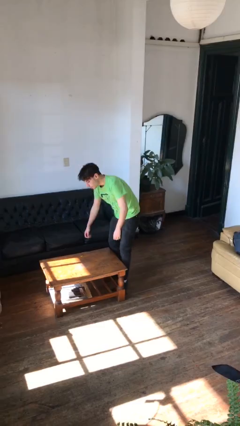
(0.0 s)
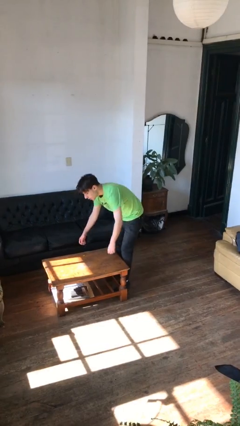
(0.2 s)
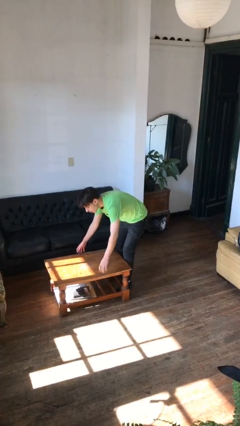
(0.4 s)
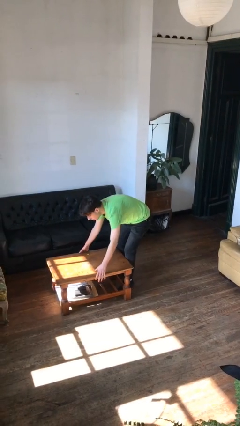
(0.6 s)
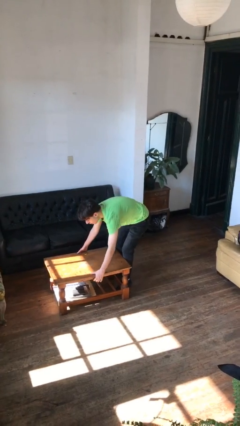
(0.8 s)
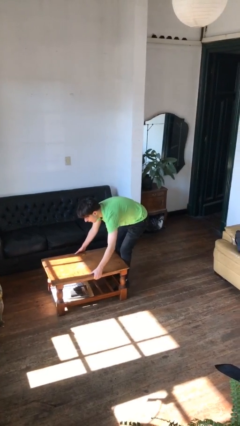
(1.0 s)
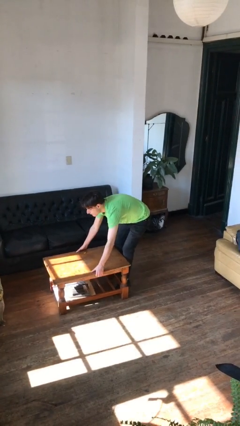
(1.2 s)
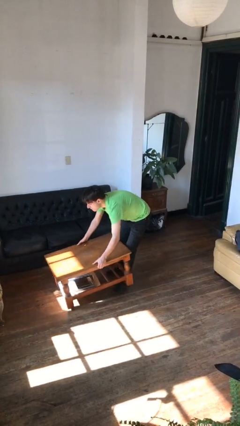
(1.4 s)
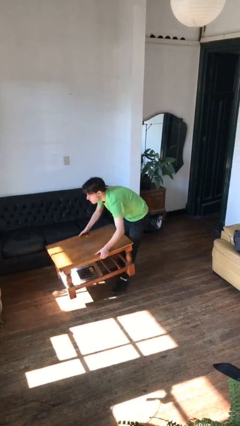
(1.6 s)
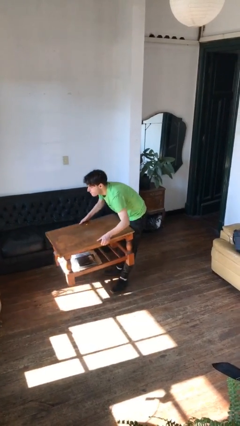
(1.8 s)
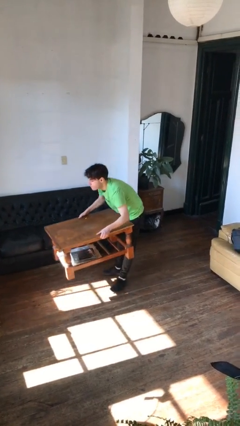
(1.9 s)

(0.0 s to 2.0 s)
person picks up object from floor

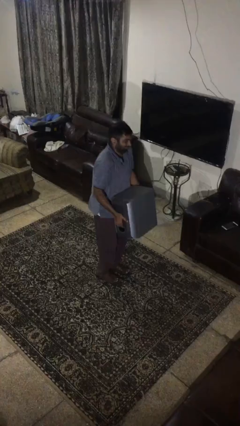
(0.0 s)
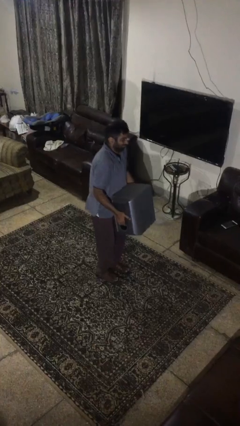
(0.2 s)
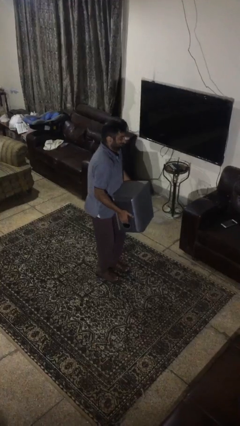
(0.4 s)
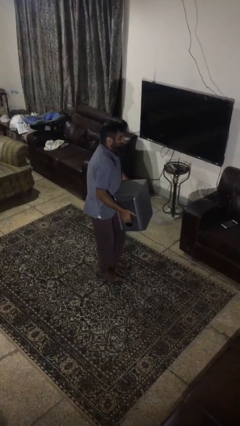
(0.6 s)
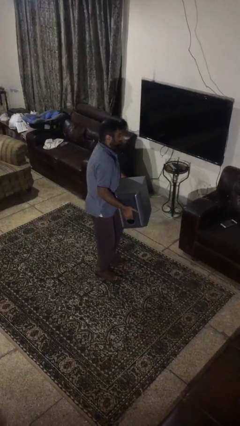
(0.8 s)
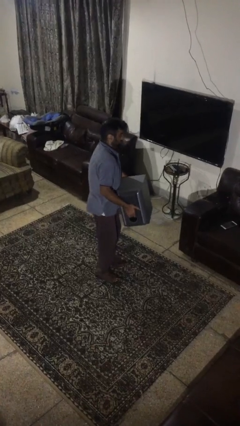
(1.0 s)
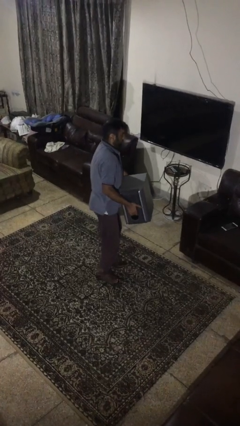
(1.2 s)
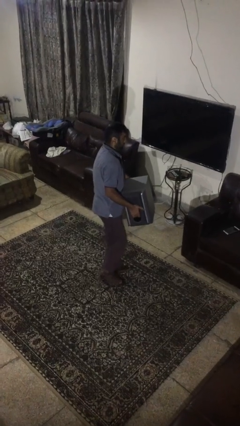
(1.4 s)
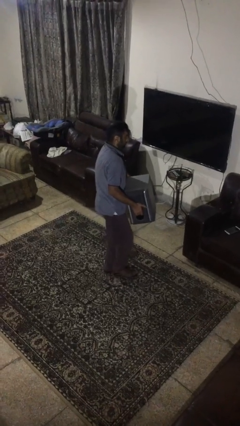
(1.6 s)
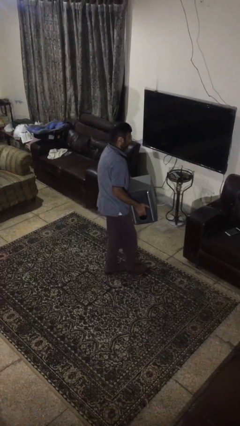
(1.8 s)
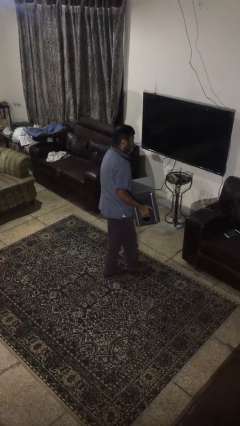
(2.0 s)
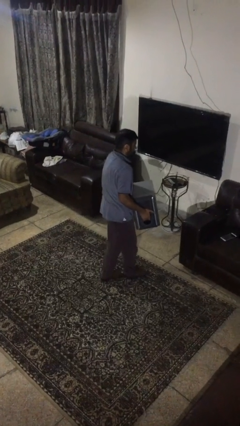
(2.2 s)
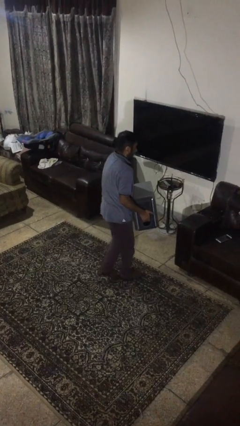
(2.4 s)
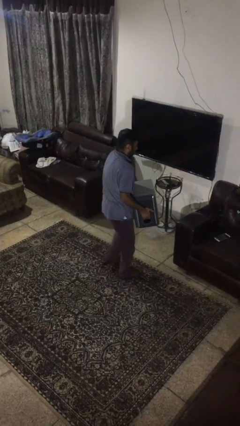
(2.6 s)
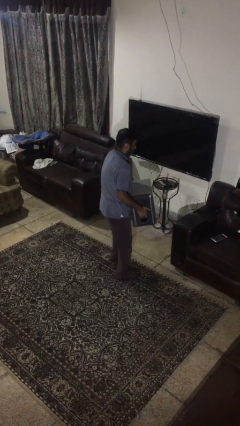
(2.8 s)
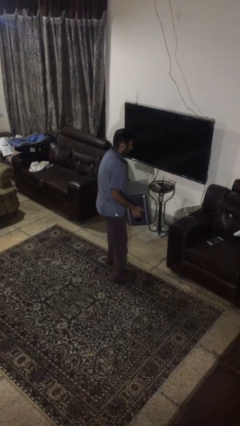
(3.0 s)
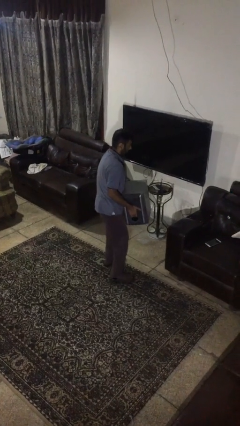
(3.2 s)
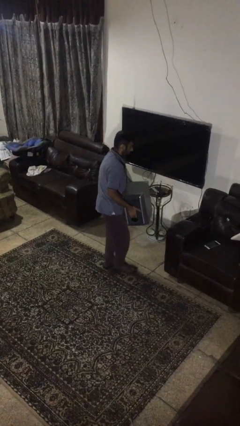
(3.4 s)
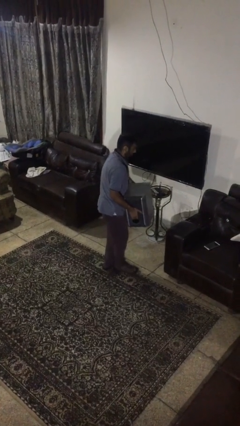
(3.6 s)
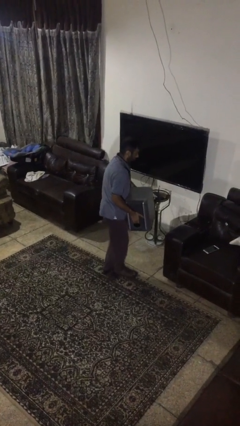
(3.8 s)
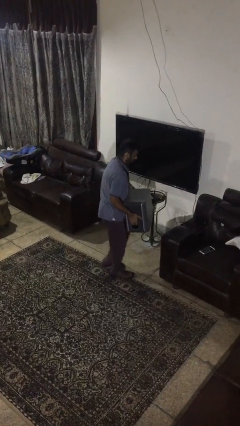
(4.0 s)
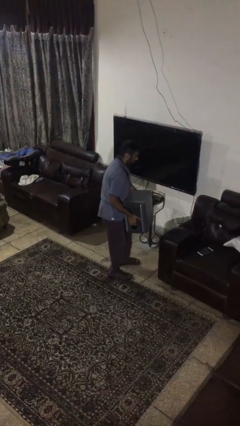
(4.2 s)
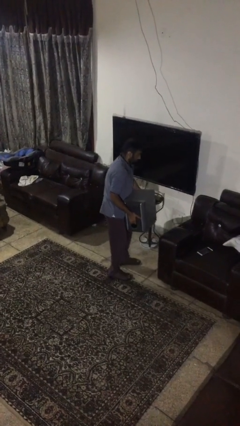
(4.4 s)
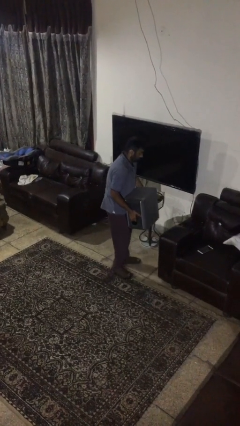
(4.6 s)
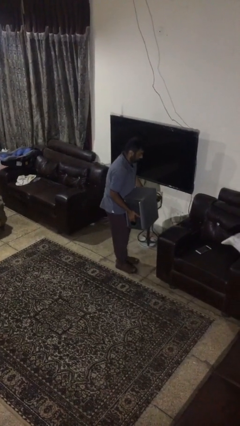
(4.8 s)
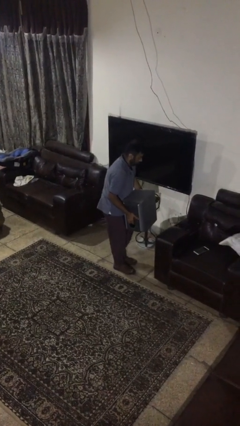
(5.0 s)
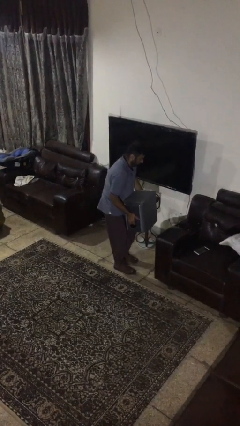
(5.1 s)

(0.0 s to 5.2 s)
person carries heavy object

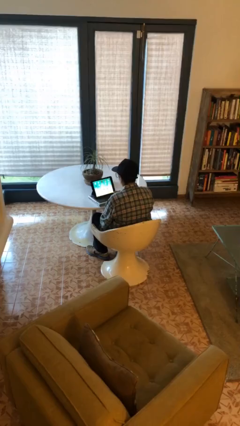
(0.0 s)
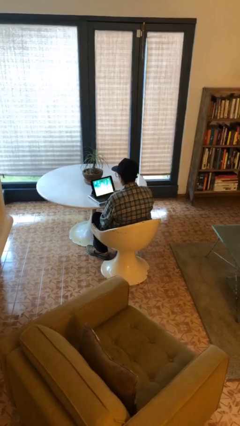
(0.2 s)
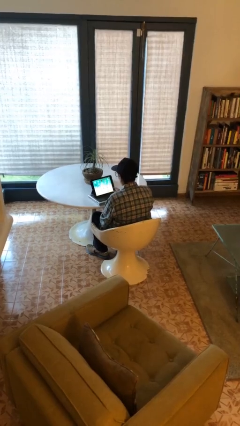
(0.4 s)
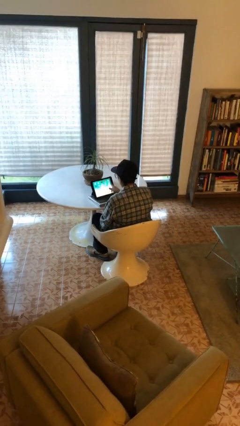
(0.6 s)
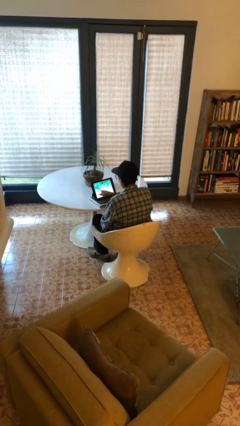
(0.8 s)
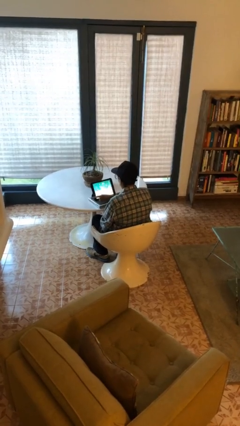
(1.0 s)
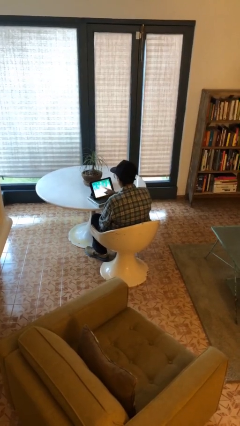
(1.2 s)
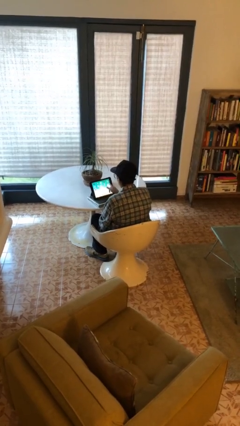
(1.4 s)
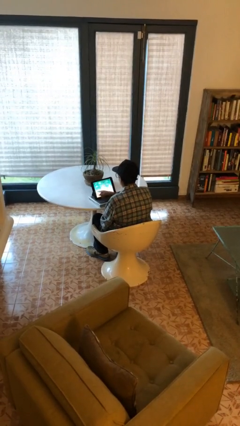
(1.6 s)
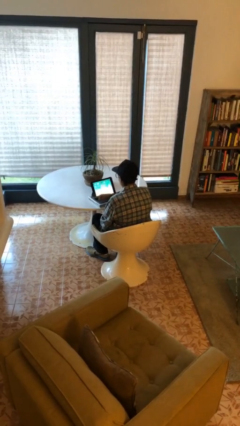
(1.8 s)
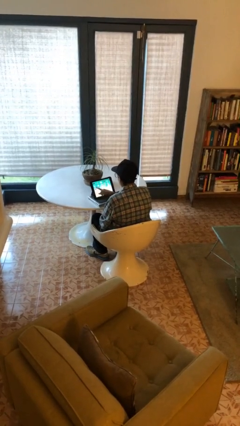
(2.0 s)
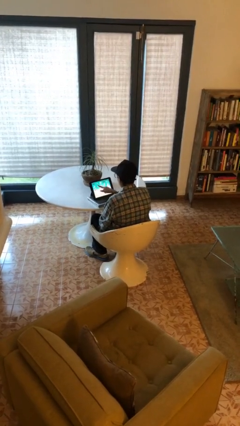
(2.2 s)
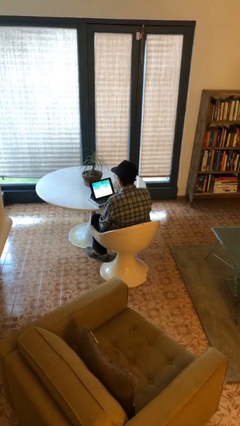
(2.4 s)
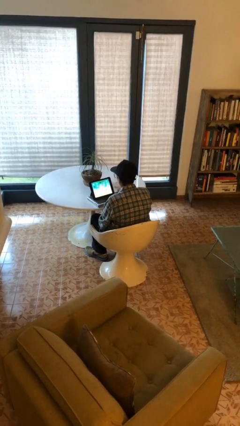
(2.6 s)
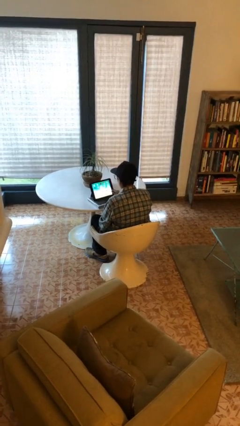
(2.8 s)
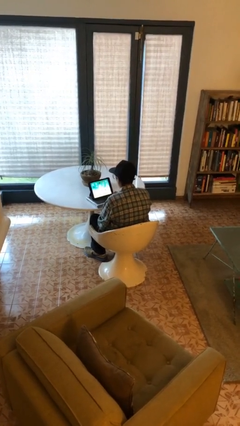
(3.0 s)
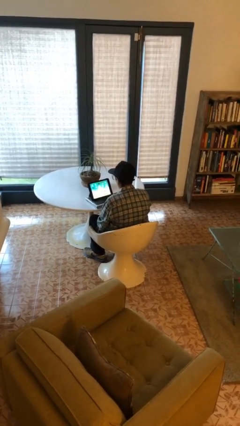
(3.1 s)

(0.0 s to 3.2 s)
person interacts with tablet

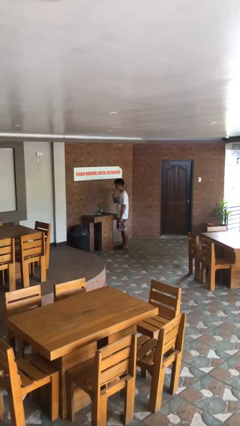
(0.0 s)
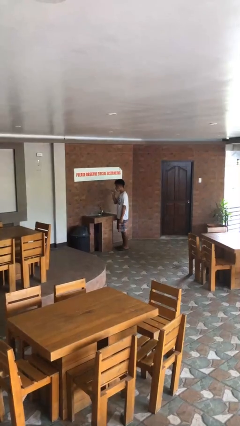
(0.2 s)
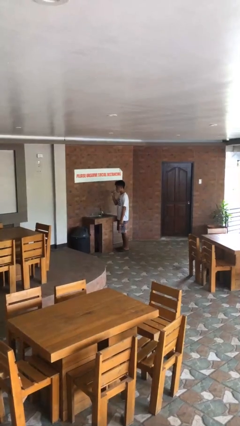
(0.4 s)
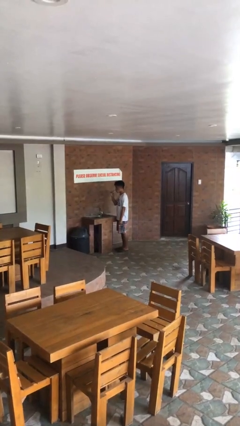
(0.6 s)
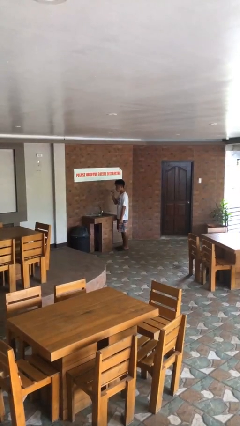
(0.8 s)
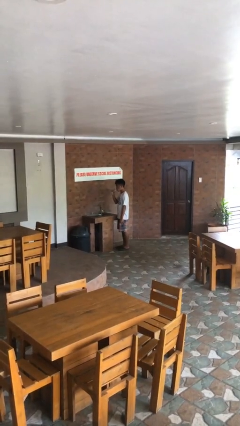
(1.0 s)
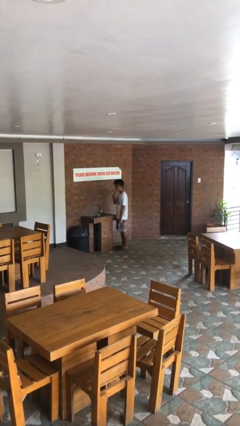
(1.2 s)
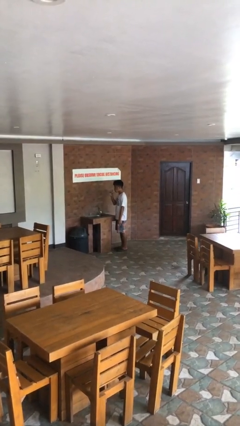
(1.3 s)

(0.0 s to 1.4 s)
person brushes teeth

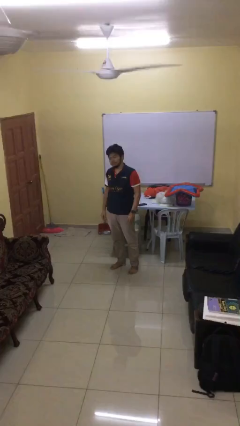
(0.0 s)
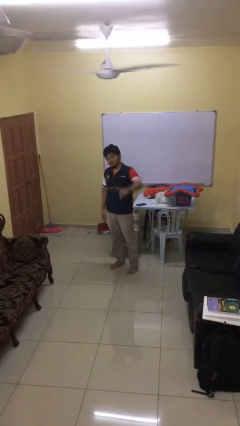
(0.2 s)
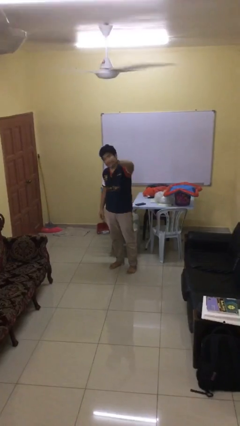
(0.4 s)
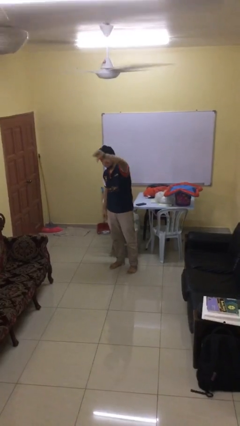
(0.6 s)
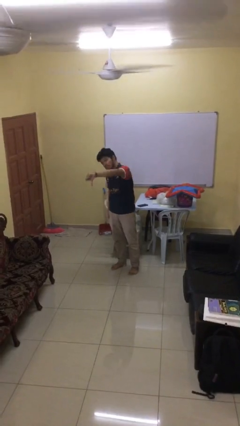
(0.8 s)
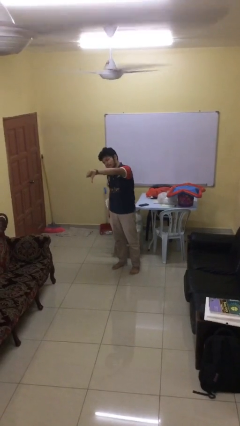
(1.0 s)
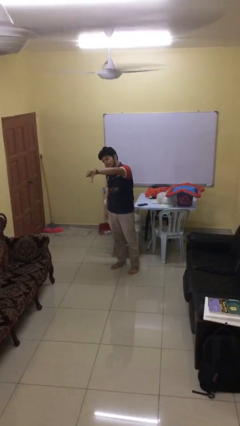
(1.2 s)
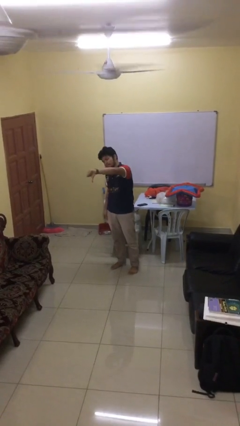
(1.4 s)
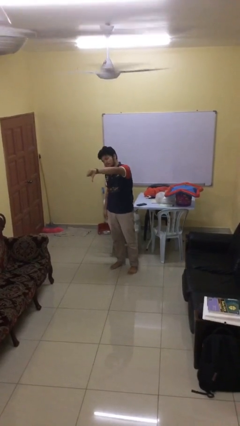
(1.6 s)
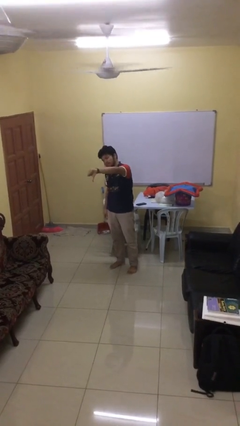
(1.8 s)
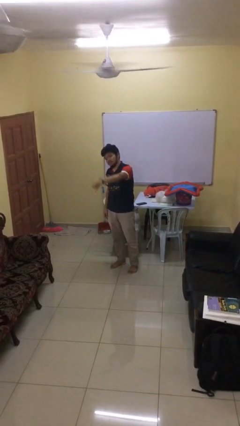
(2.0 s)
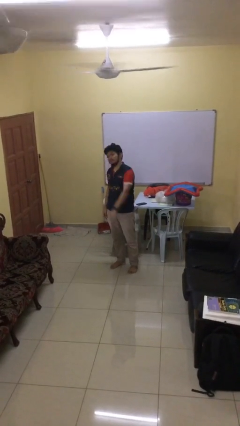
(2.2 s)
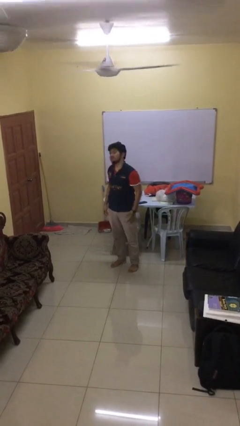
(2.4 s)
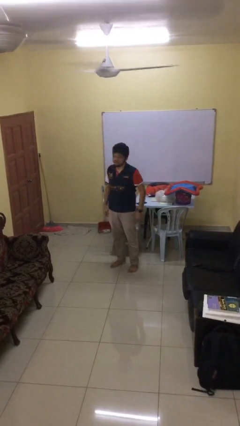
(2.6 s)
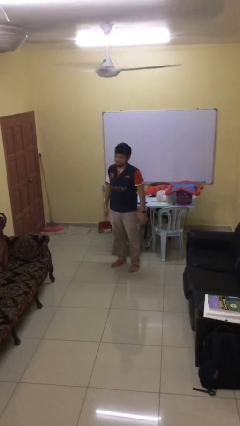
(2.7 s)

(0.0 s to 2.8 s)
person gestures thumbs down

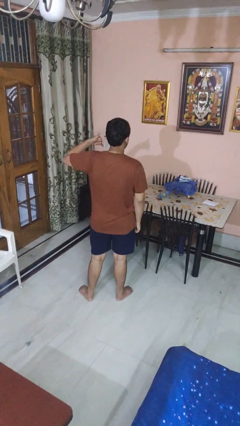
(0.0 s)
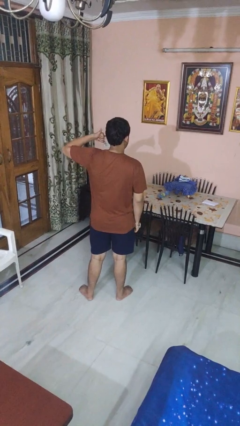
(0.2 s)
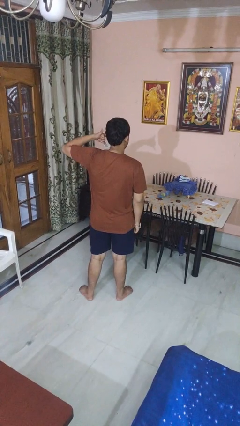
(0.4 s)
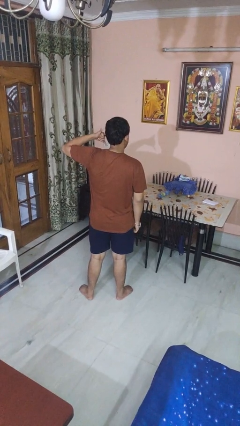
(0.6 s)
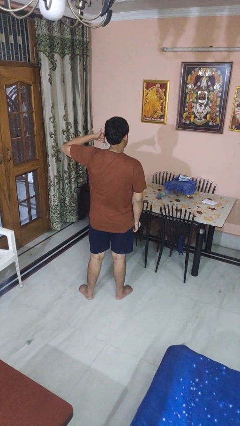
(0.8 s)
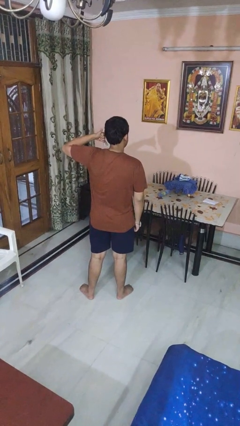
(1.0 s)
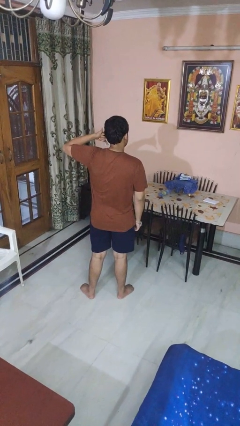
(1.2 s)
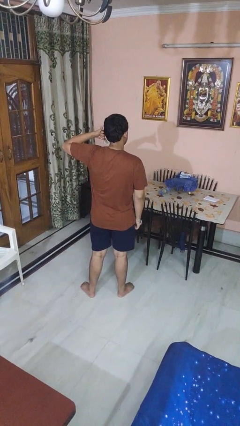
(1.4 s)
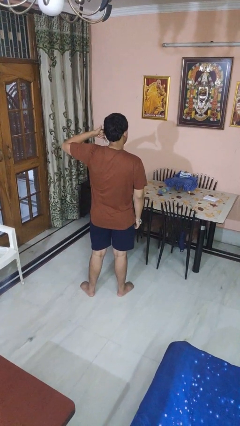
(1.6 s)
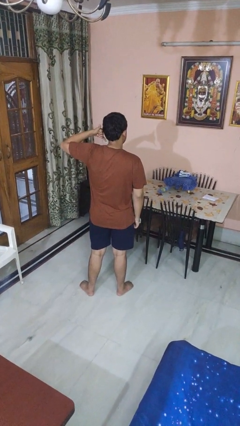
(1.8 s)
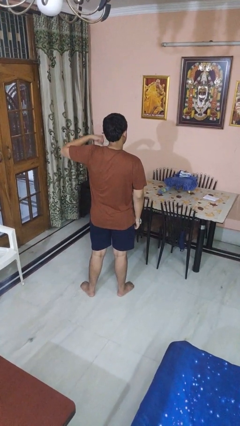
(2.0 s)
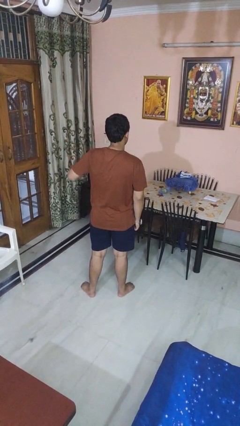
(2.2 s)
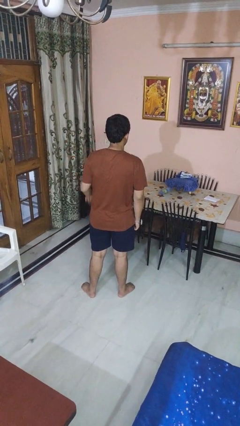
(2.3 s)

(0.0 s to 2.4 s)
person gestures call me
